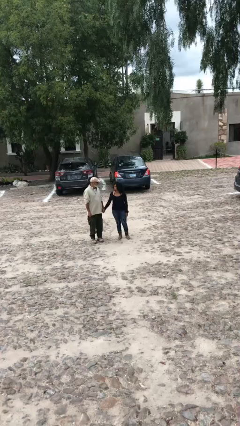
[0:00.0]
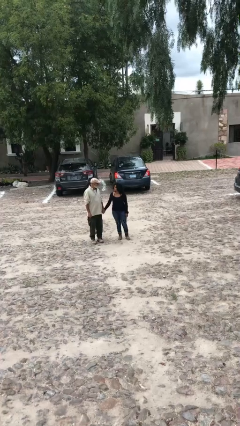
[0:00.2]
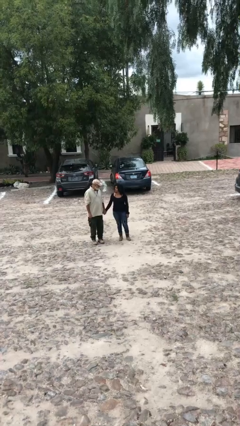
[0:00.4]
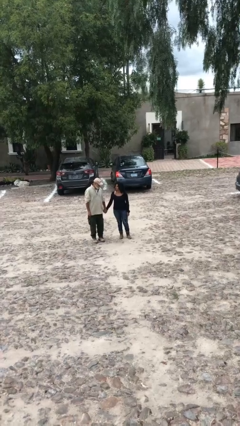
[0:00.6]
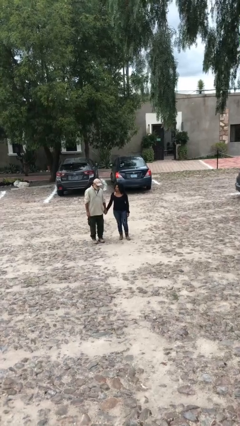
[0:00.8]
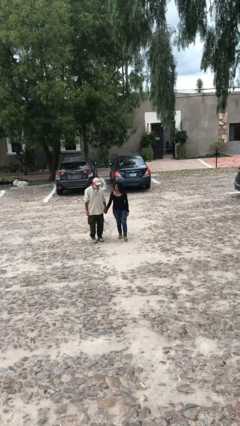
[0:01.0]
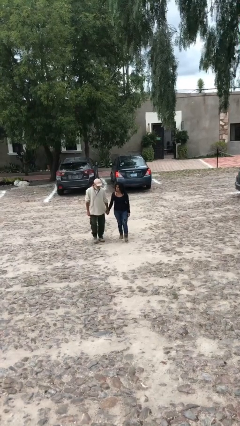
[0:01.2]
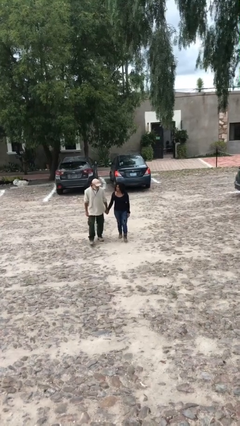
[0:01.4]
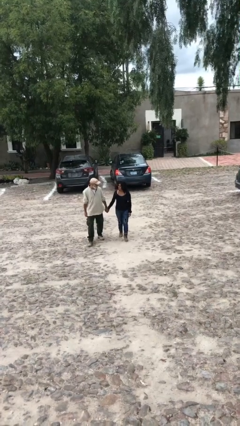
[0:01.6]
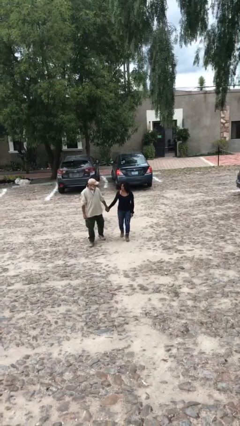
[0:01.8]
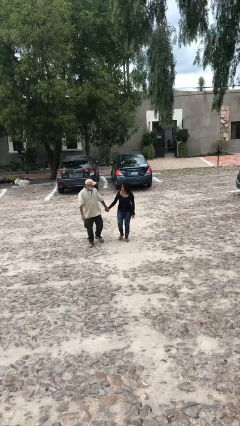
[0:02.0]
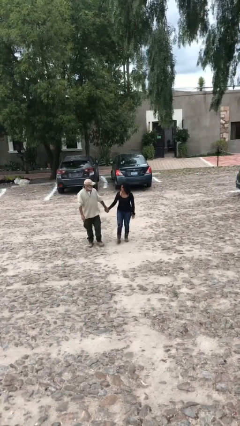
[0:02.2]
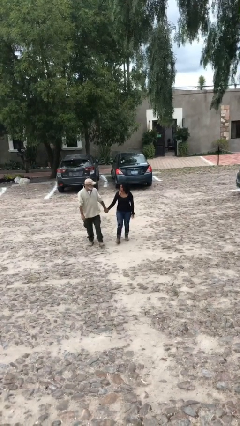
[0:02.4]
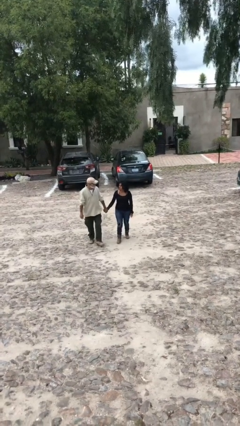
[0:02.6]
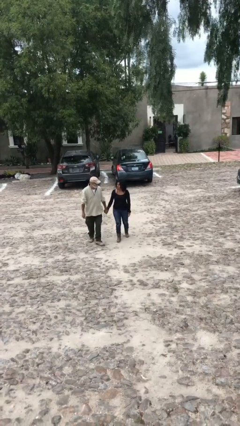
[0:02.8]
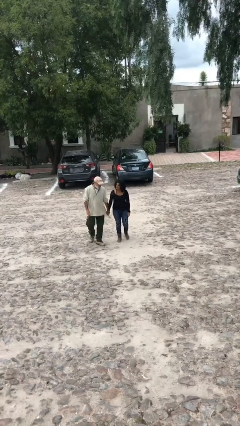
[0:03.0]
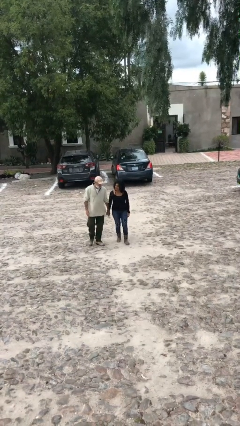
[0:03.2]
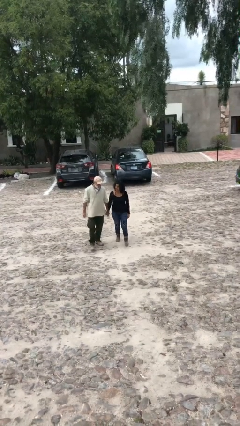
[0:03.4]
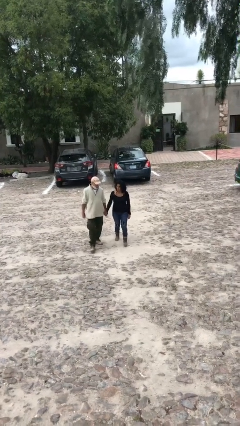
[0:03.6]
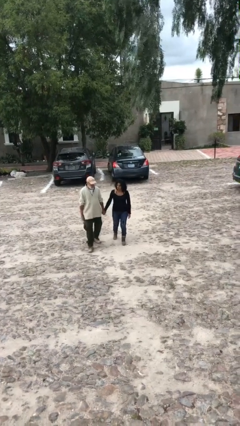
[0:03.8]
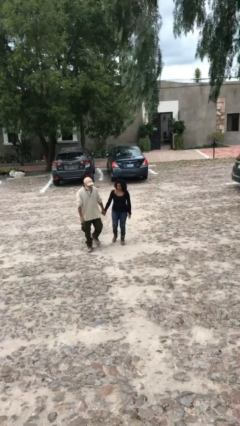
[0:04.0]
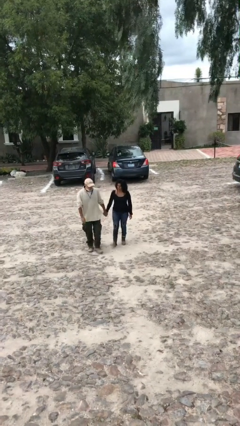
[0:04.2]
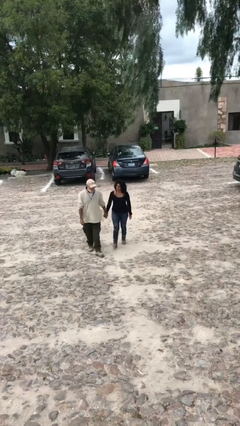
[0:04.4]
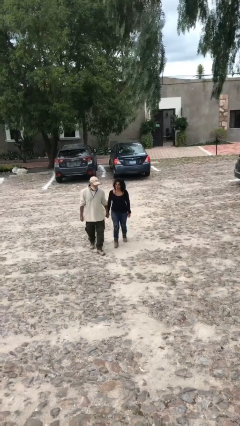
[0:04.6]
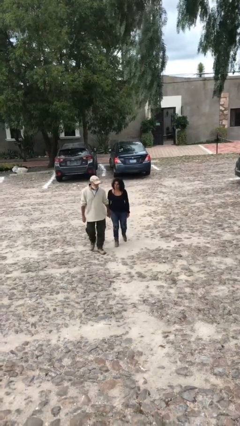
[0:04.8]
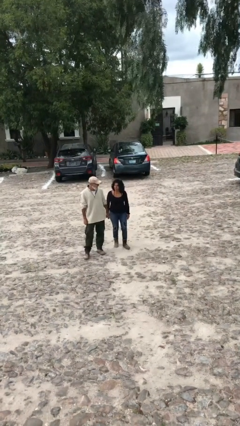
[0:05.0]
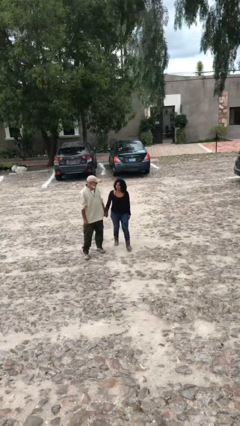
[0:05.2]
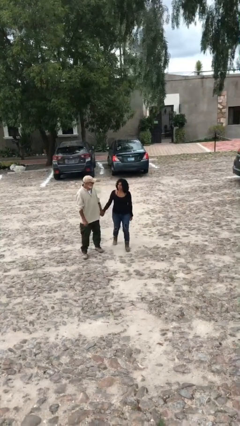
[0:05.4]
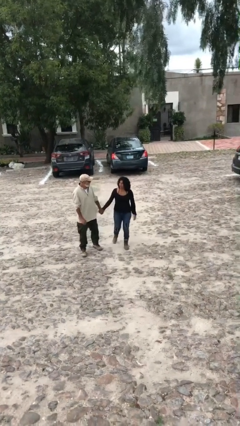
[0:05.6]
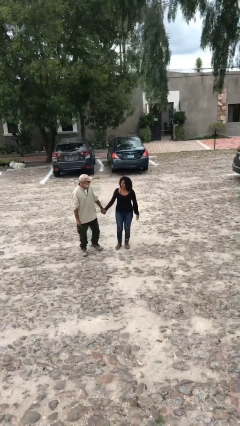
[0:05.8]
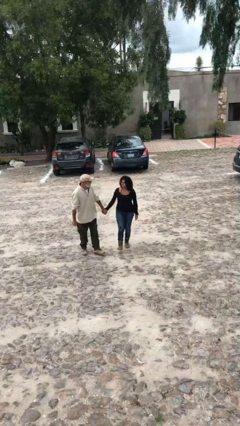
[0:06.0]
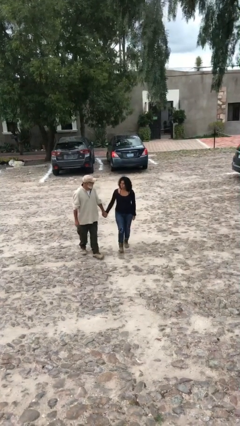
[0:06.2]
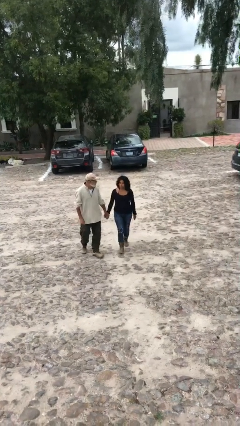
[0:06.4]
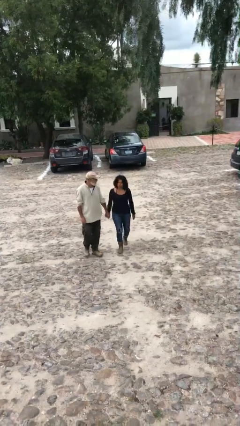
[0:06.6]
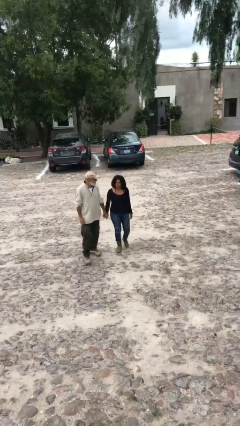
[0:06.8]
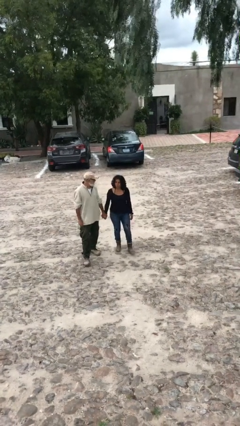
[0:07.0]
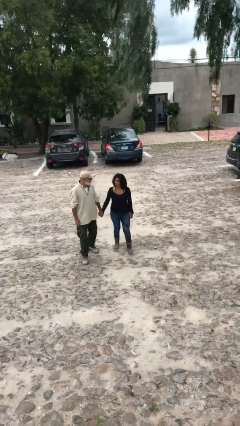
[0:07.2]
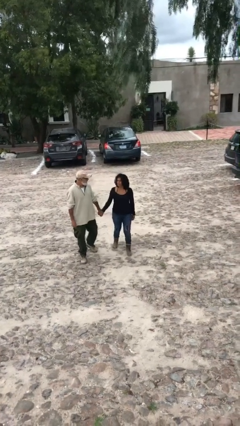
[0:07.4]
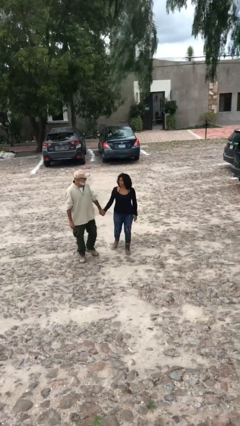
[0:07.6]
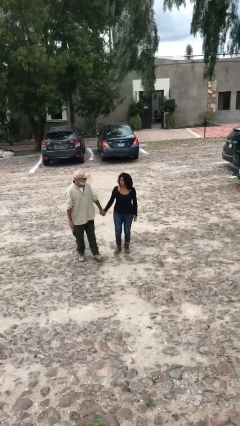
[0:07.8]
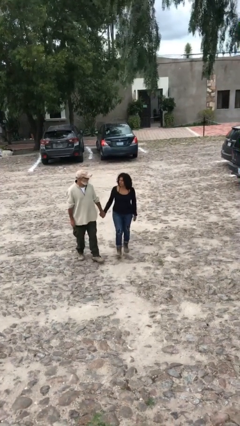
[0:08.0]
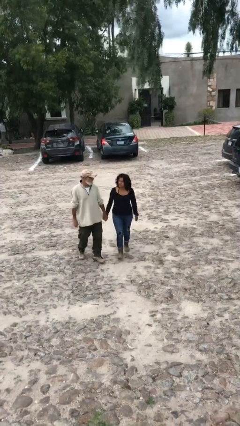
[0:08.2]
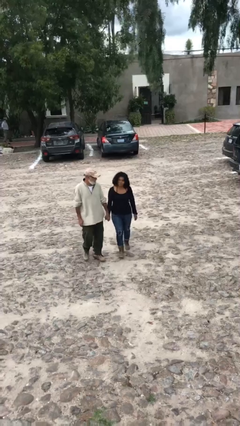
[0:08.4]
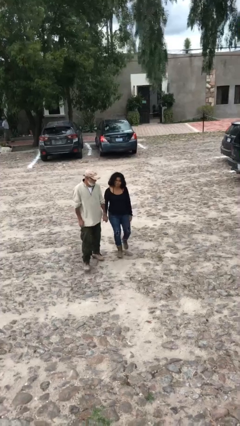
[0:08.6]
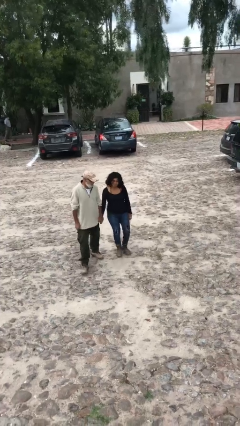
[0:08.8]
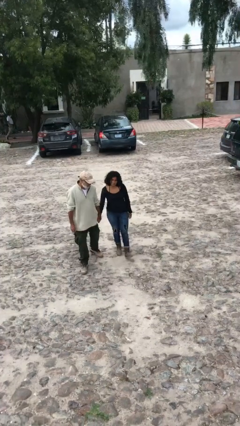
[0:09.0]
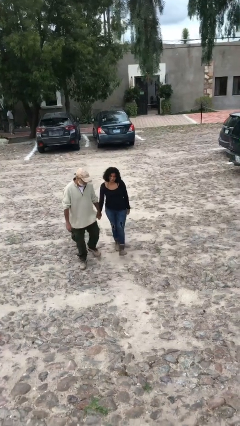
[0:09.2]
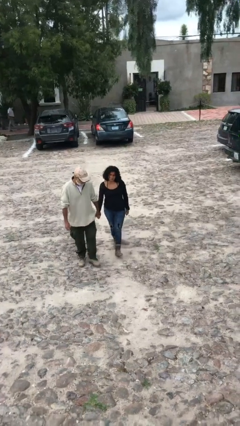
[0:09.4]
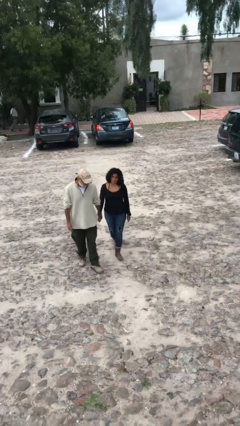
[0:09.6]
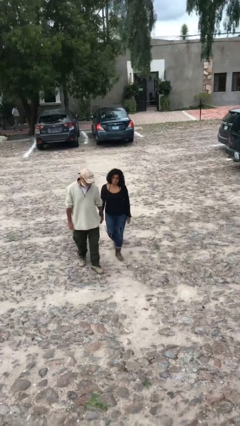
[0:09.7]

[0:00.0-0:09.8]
person holds hand

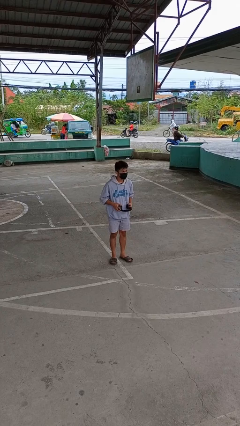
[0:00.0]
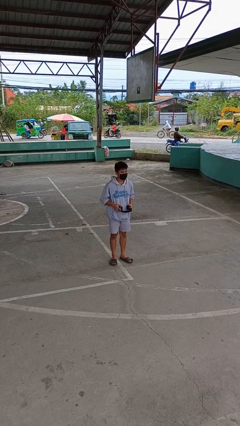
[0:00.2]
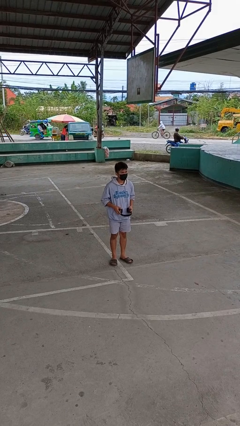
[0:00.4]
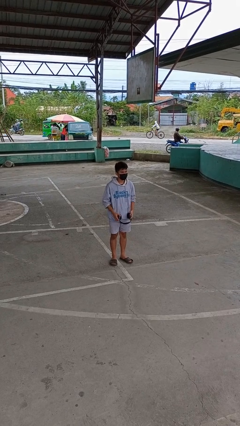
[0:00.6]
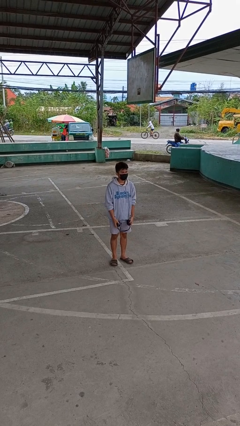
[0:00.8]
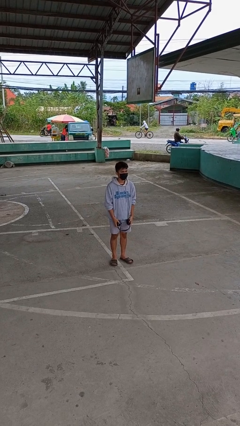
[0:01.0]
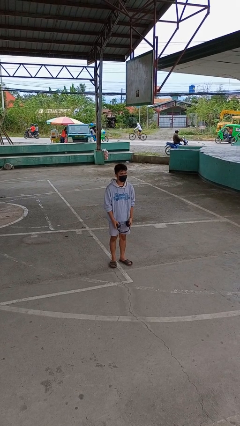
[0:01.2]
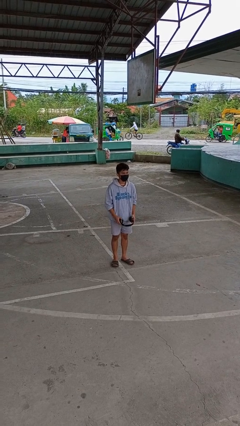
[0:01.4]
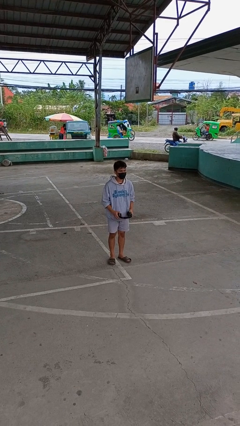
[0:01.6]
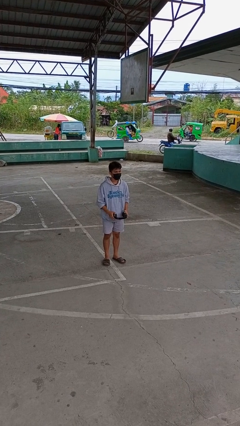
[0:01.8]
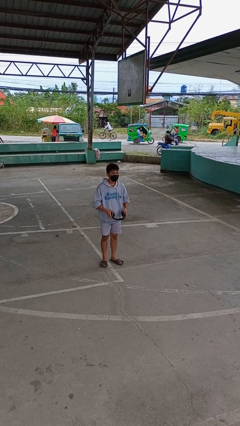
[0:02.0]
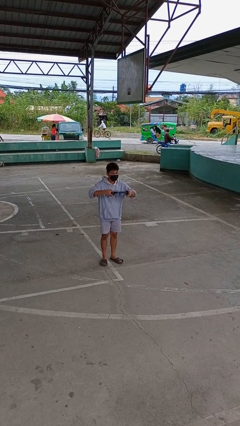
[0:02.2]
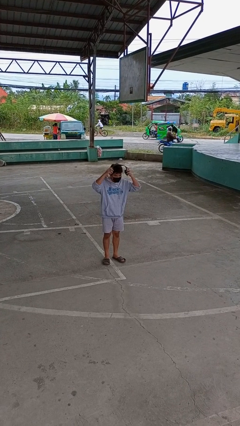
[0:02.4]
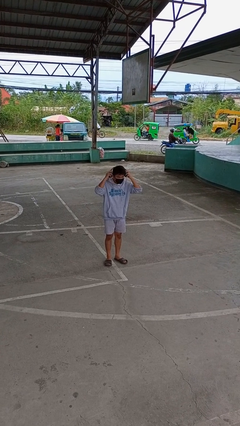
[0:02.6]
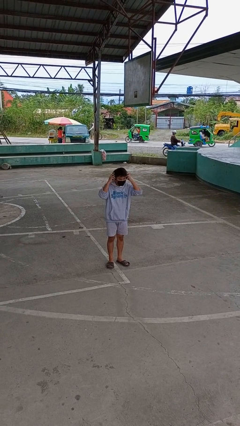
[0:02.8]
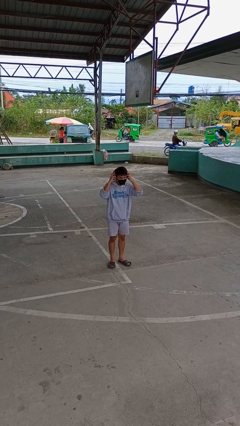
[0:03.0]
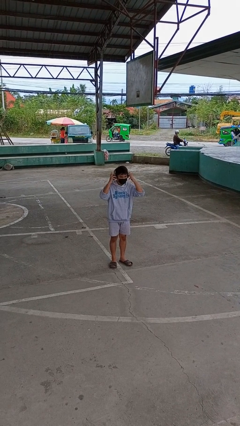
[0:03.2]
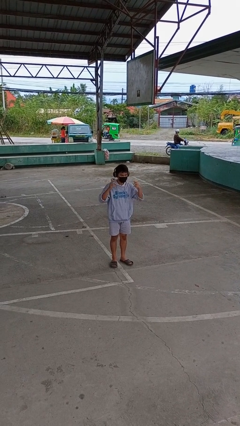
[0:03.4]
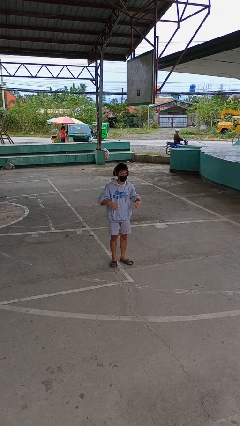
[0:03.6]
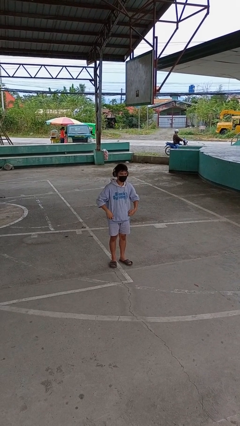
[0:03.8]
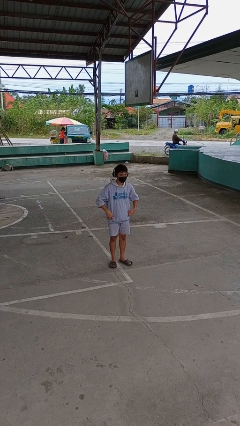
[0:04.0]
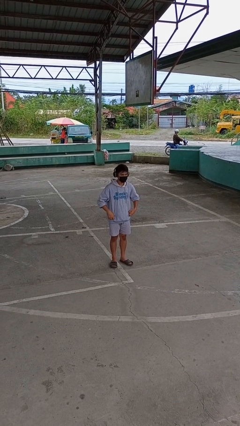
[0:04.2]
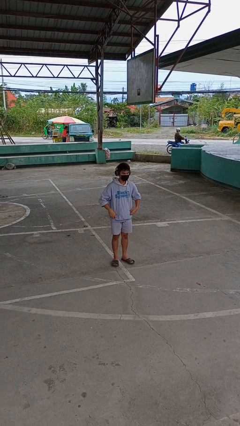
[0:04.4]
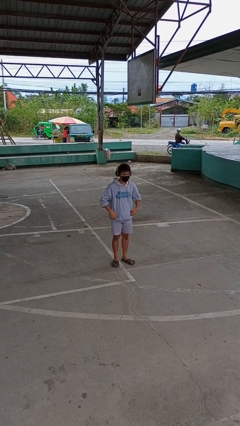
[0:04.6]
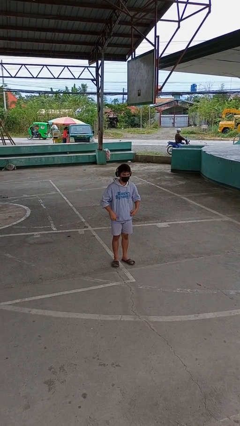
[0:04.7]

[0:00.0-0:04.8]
person puts on headphones

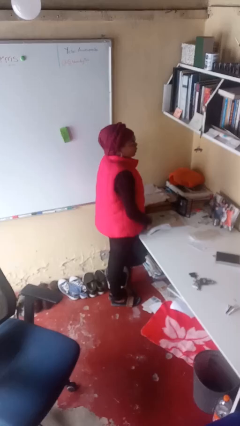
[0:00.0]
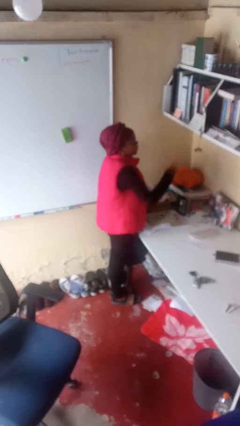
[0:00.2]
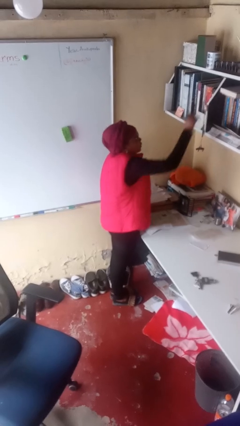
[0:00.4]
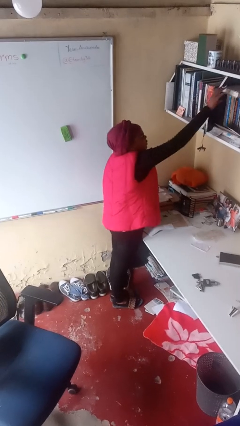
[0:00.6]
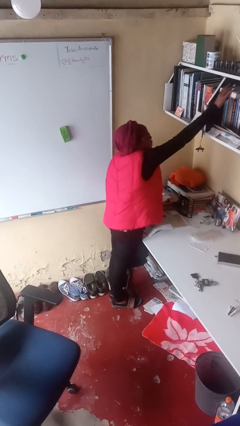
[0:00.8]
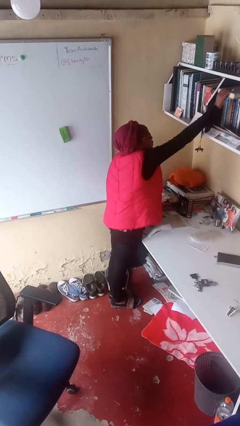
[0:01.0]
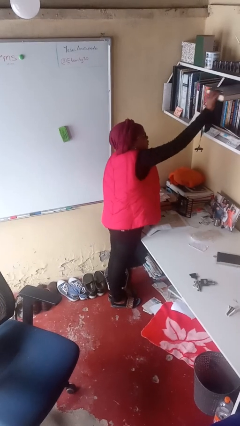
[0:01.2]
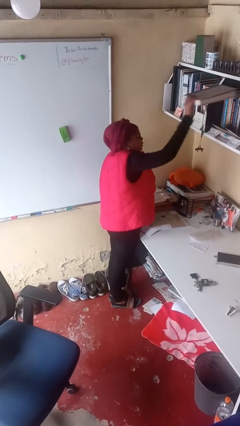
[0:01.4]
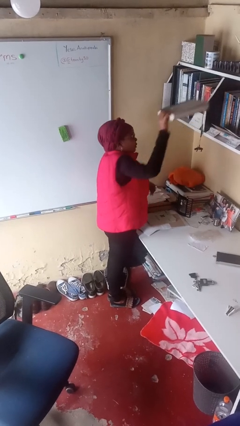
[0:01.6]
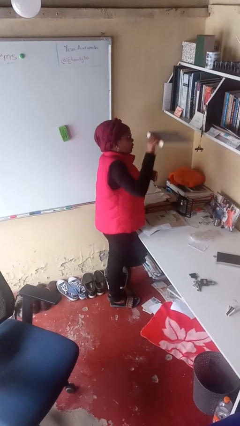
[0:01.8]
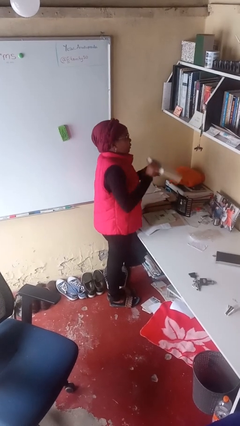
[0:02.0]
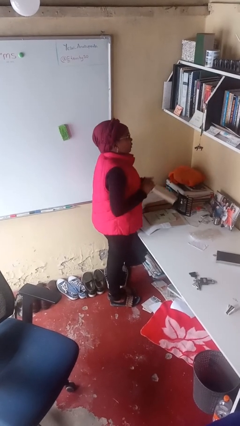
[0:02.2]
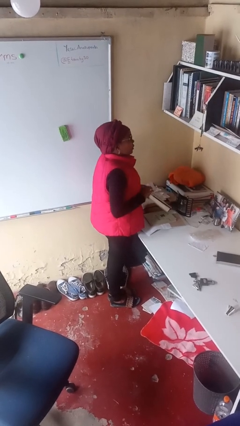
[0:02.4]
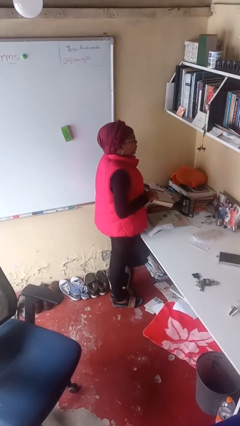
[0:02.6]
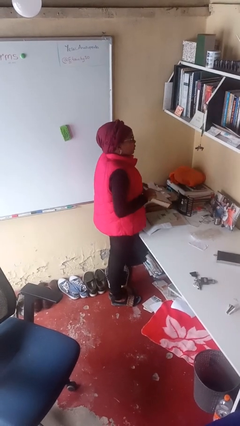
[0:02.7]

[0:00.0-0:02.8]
person picks up object from shelf

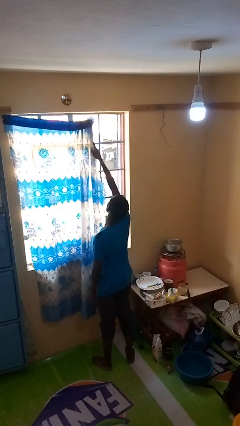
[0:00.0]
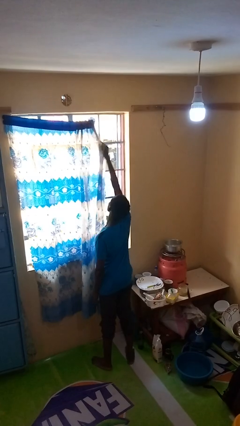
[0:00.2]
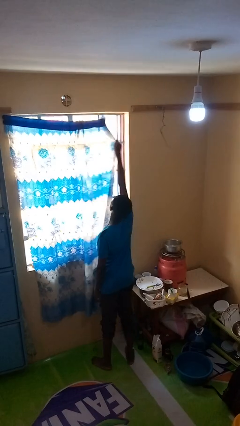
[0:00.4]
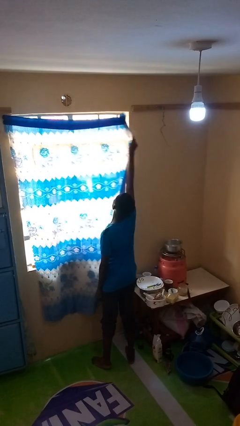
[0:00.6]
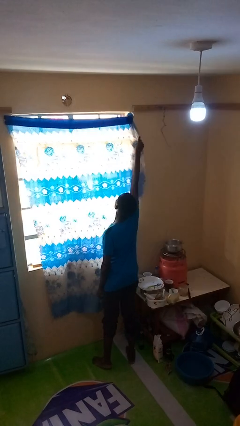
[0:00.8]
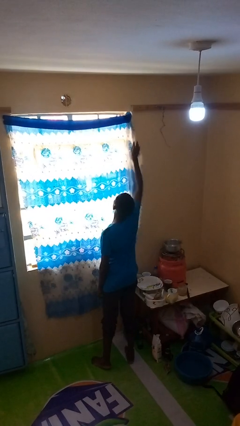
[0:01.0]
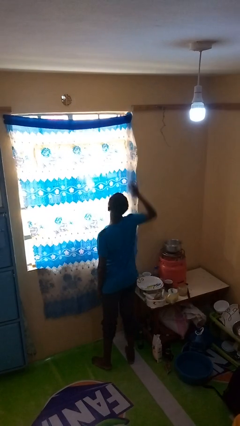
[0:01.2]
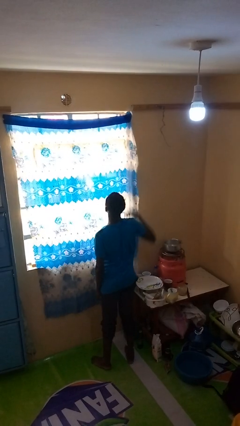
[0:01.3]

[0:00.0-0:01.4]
person closes curtains
